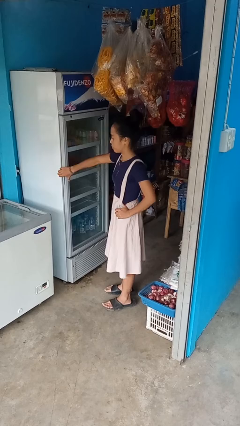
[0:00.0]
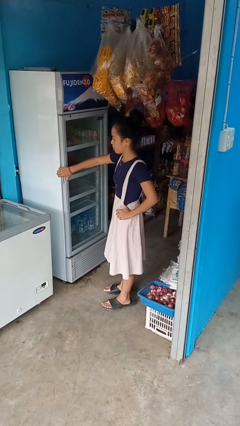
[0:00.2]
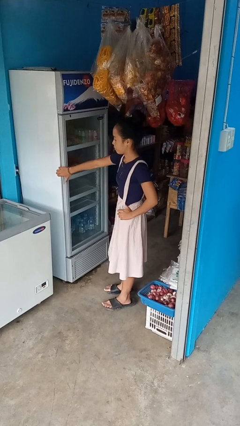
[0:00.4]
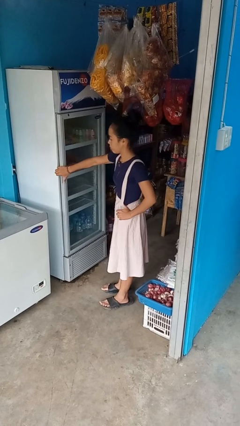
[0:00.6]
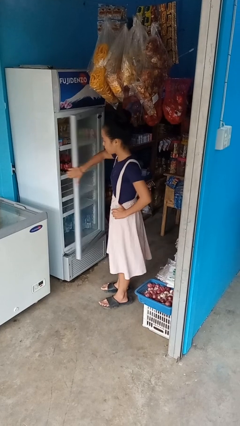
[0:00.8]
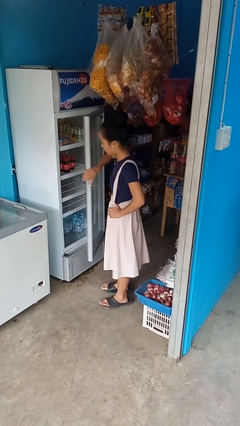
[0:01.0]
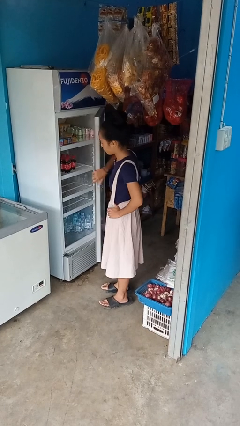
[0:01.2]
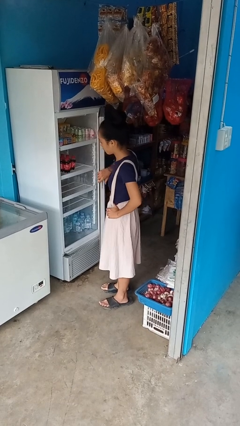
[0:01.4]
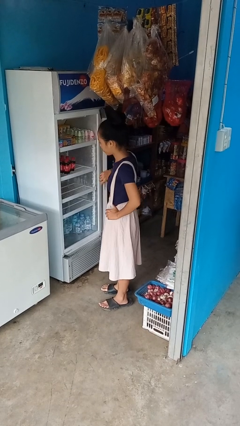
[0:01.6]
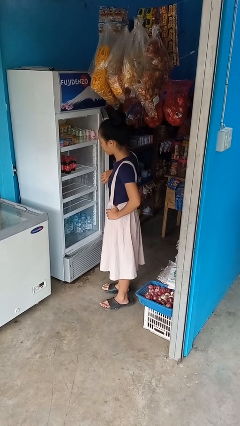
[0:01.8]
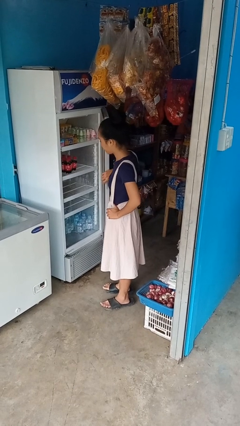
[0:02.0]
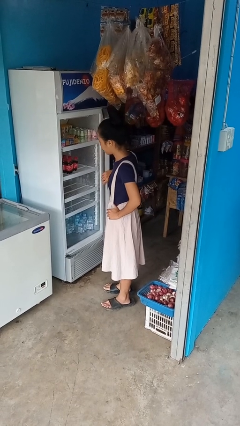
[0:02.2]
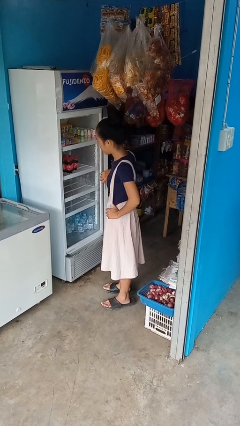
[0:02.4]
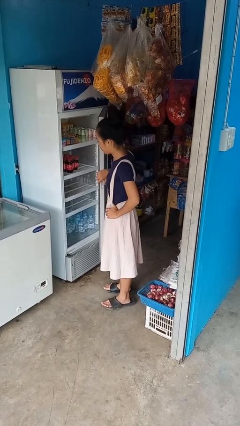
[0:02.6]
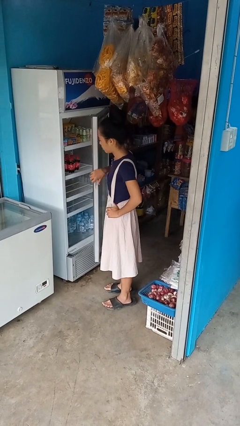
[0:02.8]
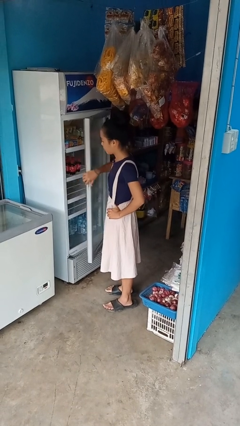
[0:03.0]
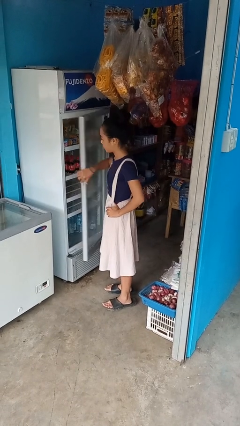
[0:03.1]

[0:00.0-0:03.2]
person opens refrigerator

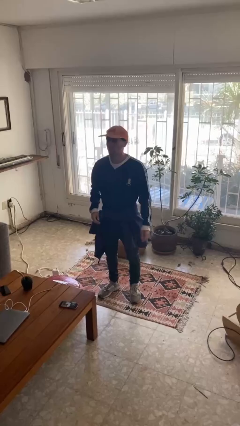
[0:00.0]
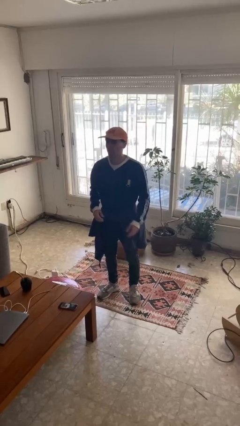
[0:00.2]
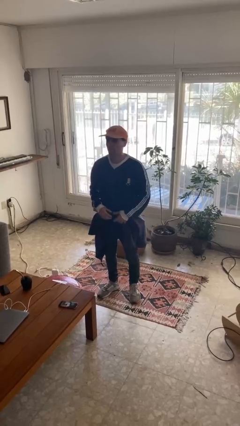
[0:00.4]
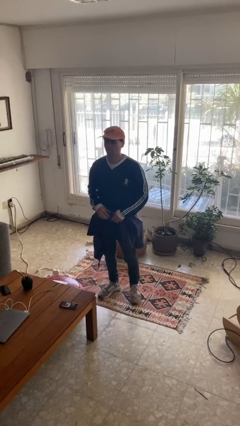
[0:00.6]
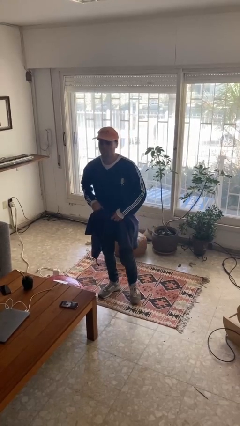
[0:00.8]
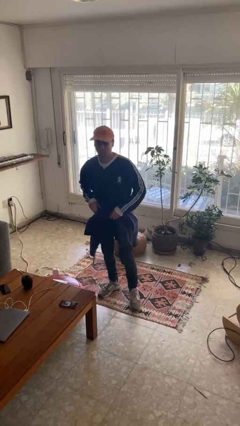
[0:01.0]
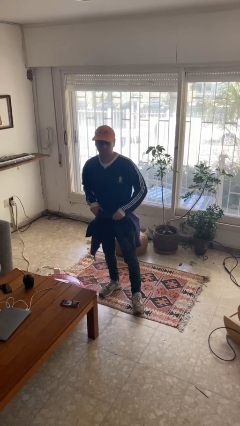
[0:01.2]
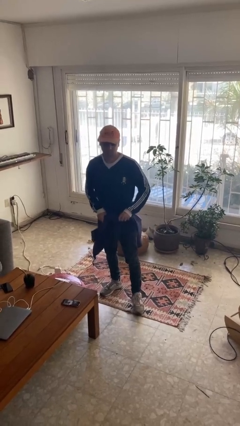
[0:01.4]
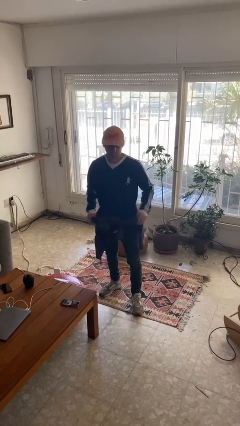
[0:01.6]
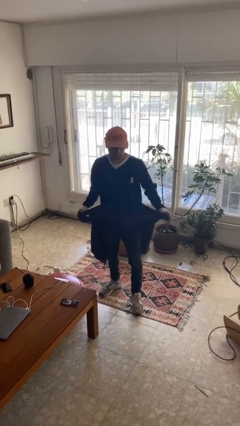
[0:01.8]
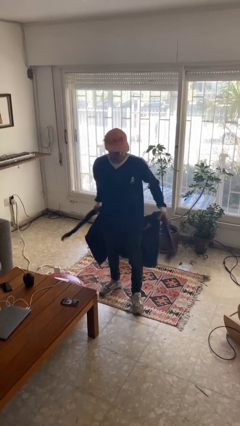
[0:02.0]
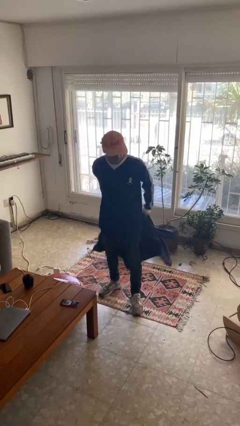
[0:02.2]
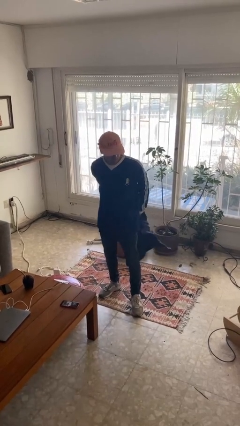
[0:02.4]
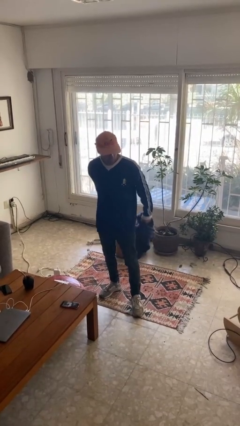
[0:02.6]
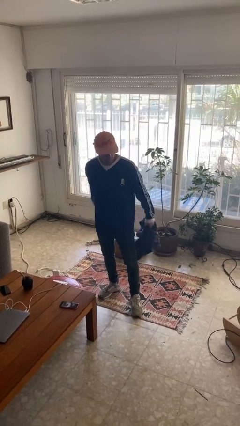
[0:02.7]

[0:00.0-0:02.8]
person unties jacket around waist

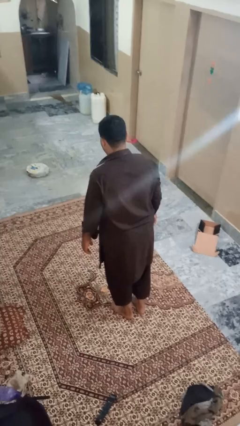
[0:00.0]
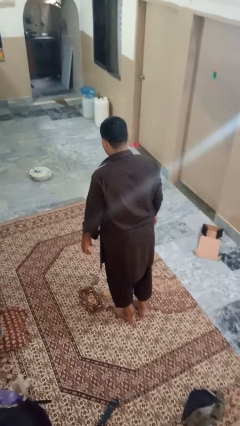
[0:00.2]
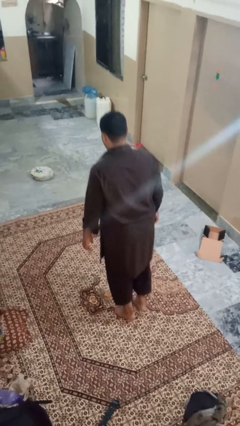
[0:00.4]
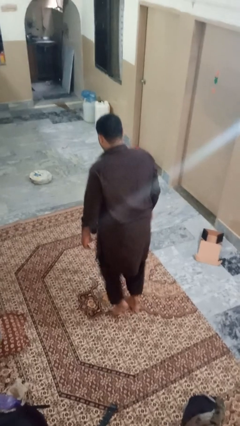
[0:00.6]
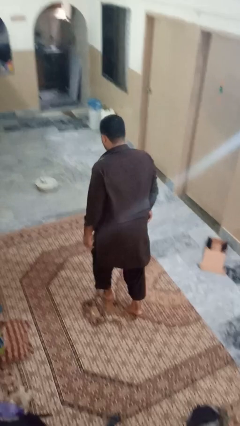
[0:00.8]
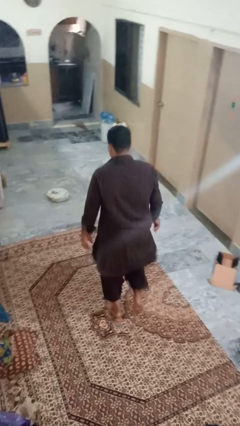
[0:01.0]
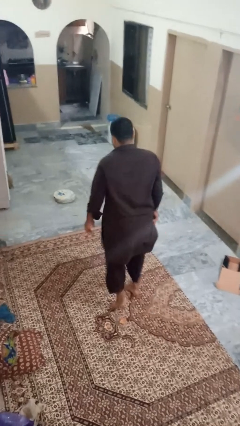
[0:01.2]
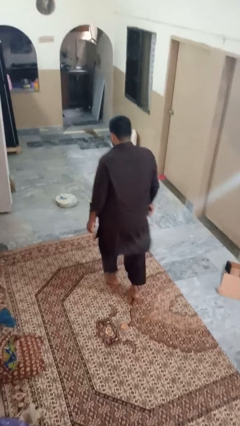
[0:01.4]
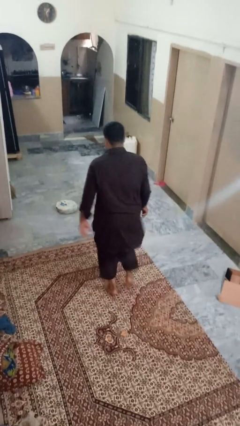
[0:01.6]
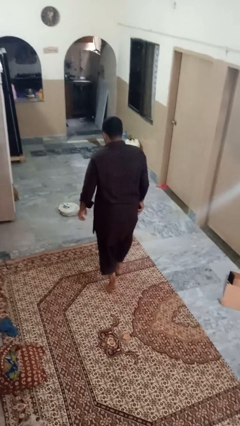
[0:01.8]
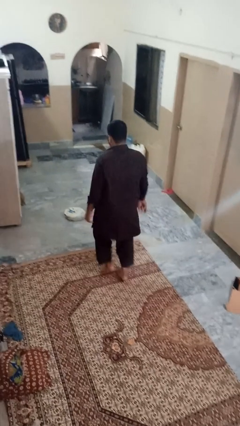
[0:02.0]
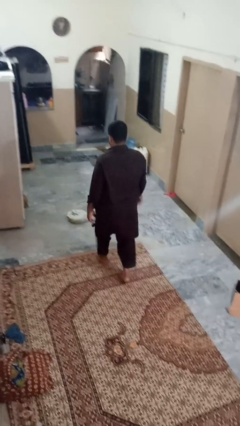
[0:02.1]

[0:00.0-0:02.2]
person walks tiptoe

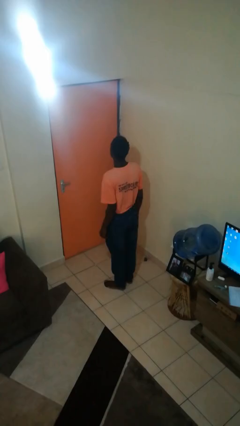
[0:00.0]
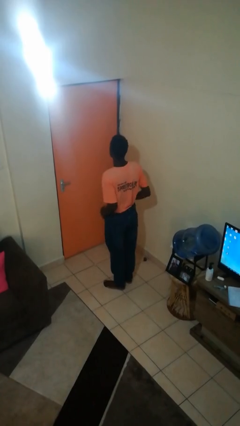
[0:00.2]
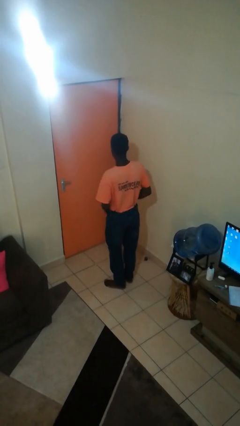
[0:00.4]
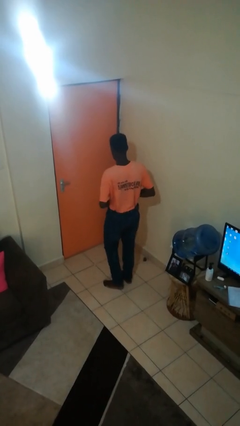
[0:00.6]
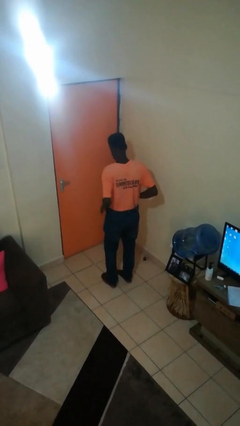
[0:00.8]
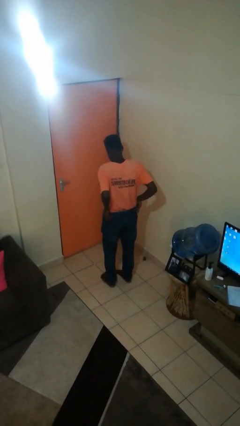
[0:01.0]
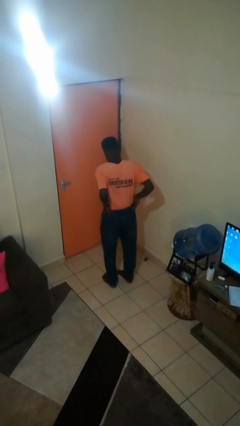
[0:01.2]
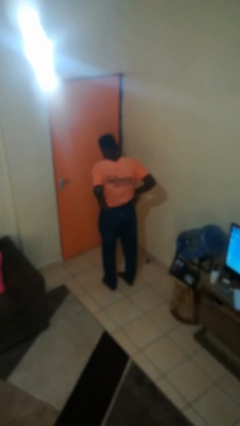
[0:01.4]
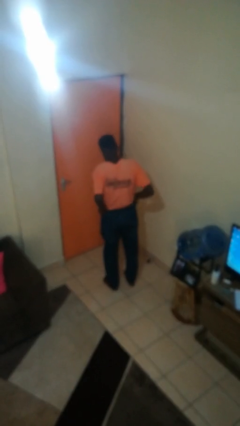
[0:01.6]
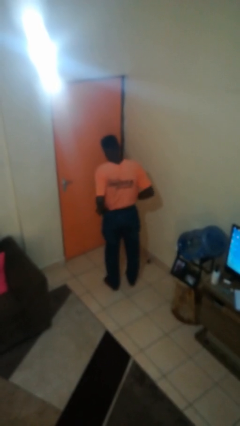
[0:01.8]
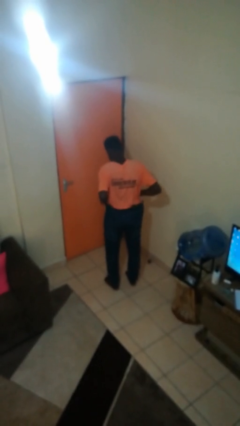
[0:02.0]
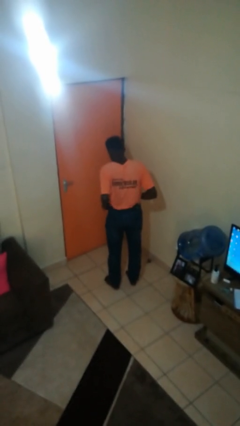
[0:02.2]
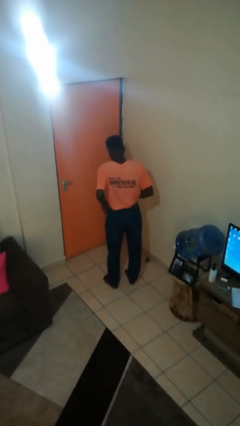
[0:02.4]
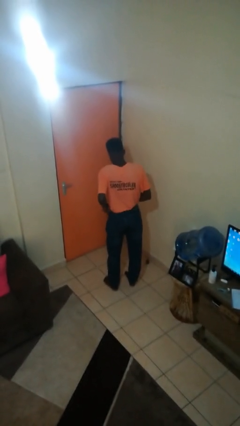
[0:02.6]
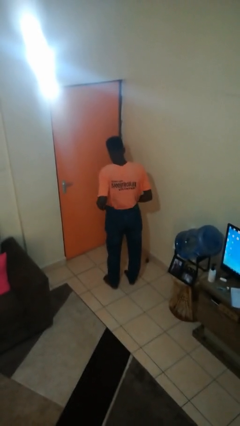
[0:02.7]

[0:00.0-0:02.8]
person hikes up pants

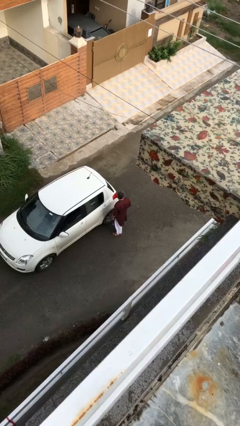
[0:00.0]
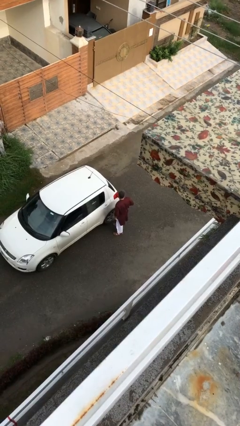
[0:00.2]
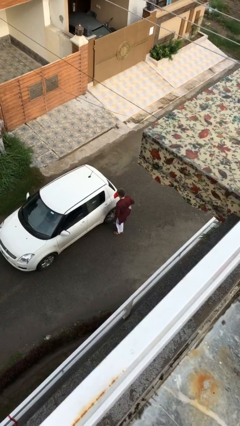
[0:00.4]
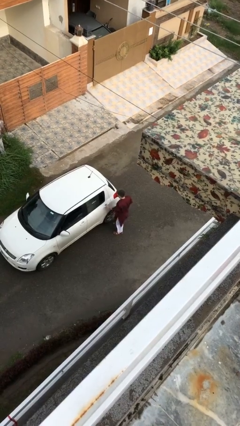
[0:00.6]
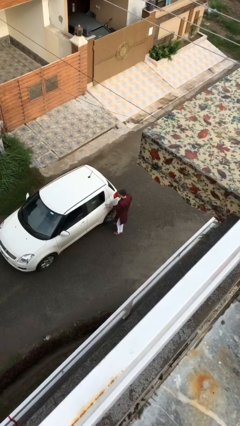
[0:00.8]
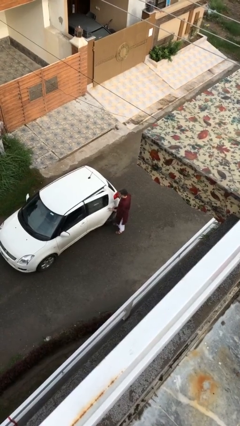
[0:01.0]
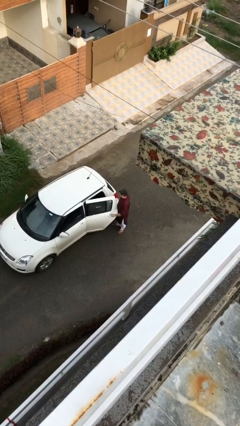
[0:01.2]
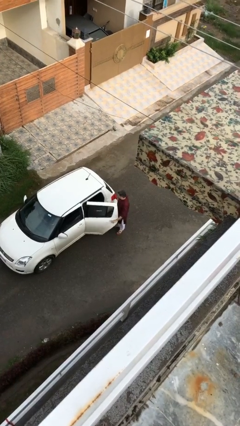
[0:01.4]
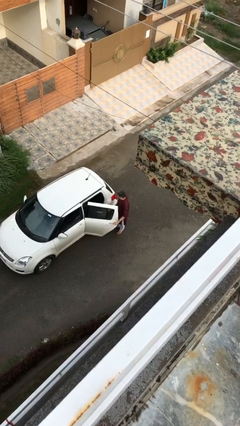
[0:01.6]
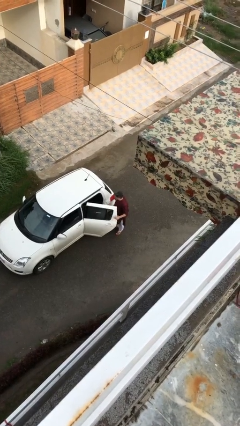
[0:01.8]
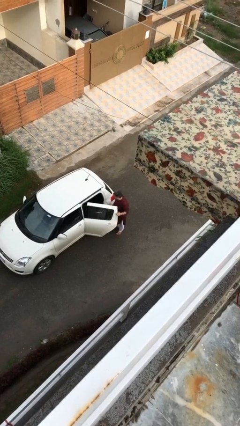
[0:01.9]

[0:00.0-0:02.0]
person opens car door

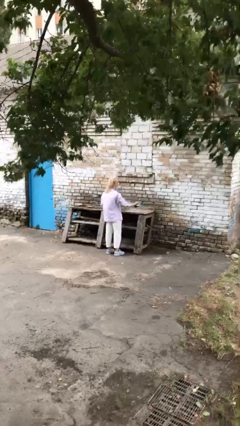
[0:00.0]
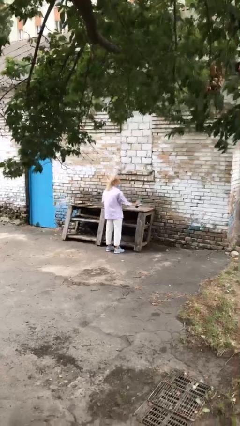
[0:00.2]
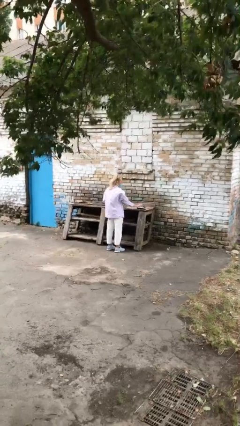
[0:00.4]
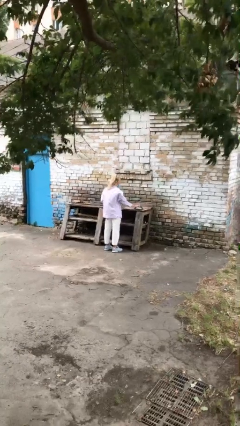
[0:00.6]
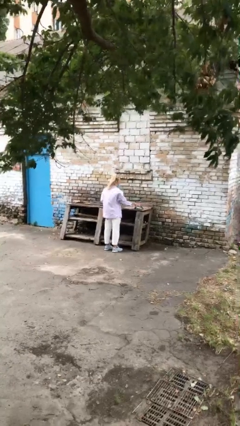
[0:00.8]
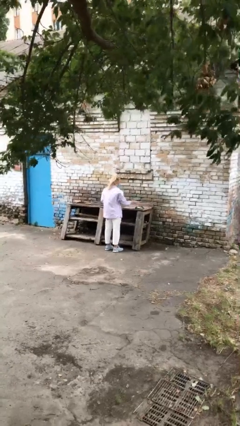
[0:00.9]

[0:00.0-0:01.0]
person puts down object on table

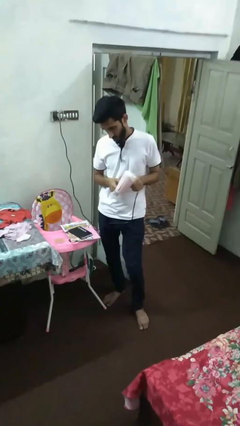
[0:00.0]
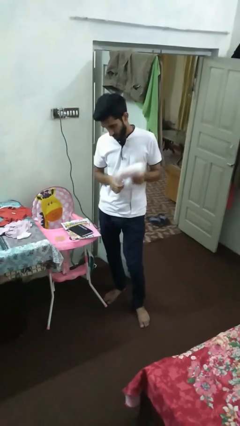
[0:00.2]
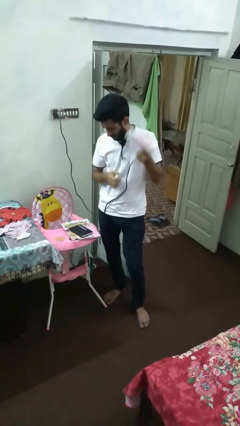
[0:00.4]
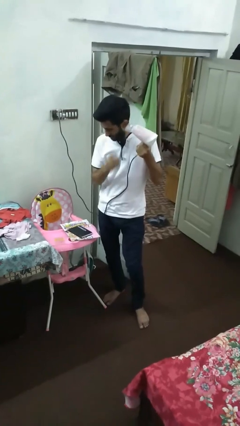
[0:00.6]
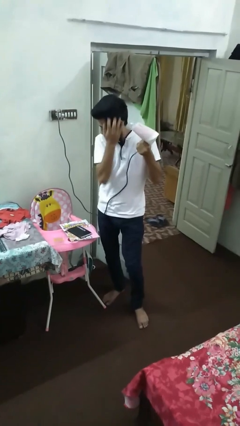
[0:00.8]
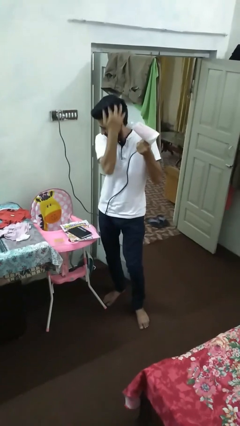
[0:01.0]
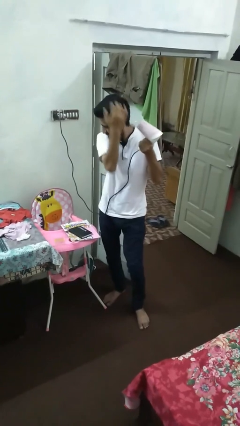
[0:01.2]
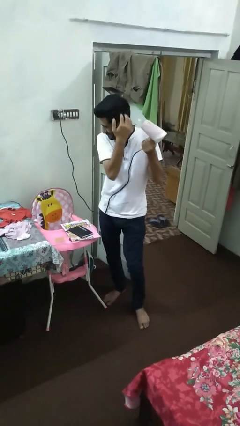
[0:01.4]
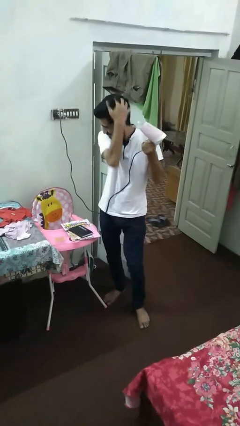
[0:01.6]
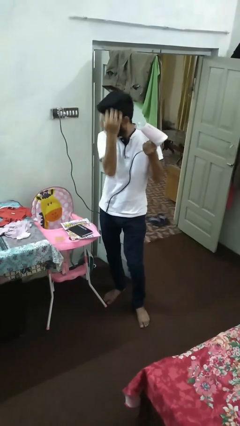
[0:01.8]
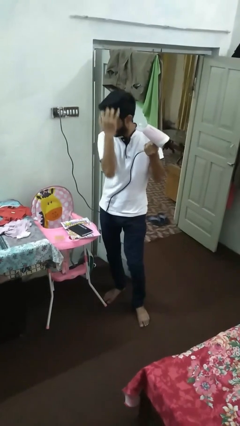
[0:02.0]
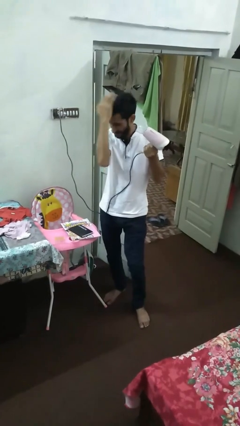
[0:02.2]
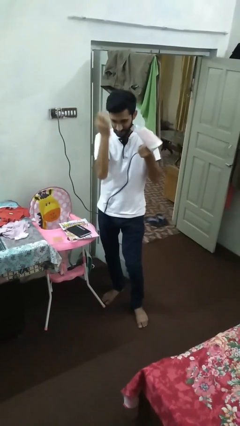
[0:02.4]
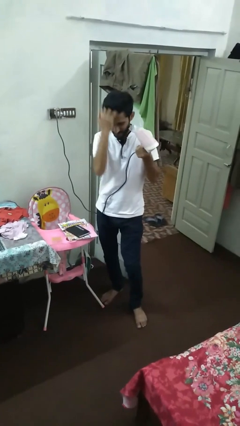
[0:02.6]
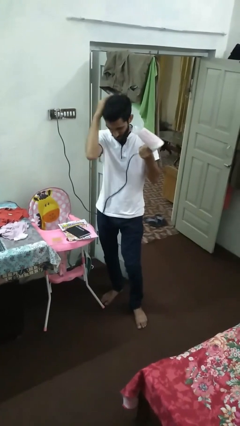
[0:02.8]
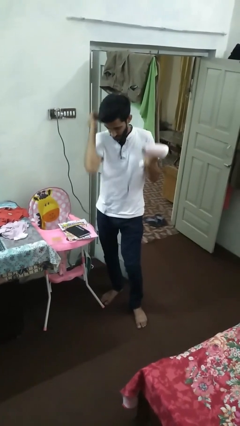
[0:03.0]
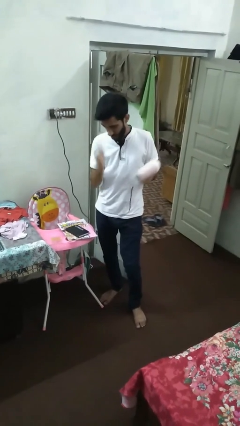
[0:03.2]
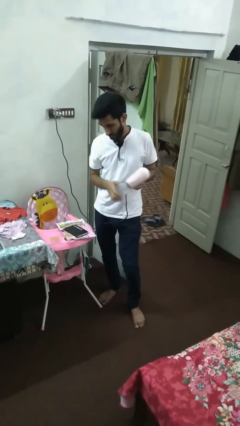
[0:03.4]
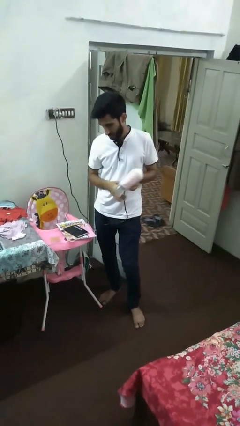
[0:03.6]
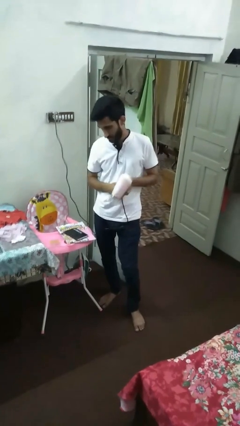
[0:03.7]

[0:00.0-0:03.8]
person dries hair with hairdryer
